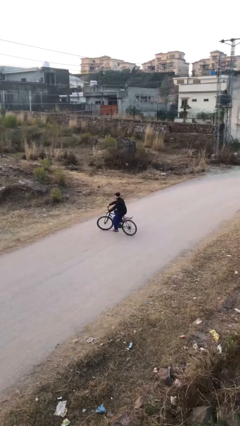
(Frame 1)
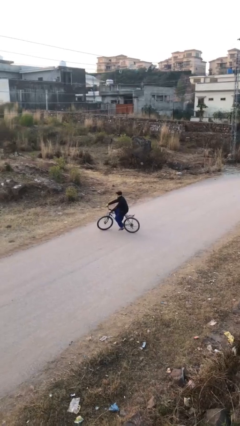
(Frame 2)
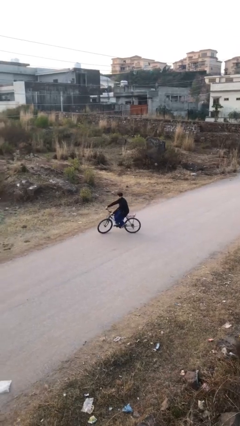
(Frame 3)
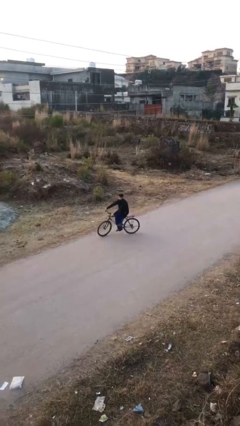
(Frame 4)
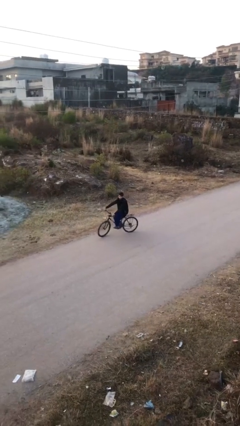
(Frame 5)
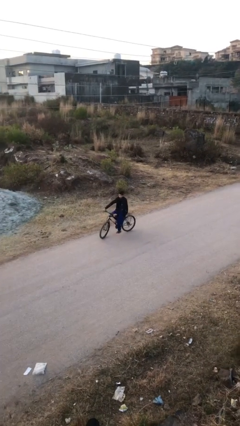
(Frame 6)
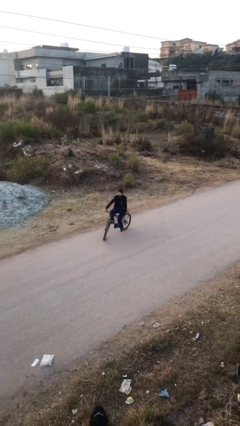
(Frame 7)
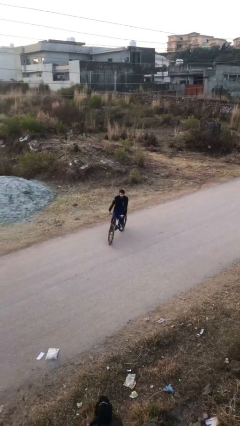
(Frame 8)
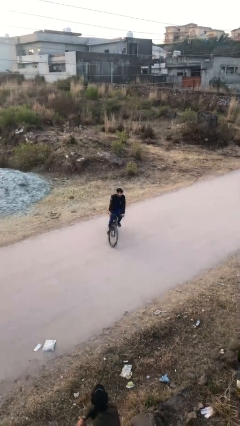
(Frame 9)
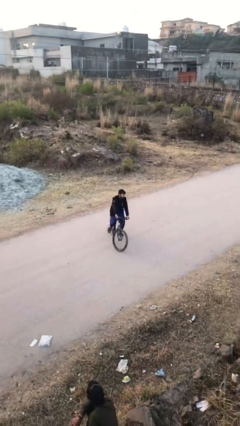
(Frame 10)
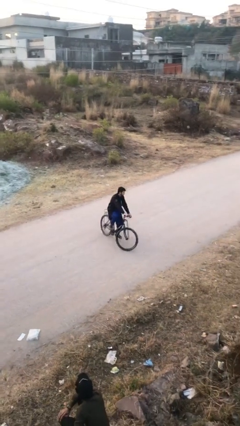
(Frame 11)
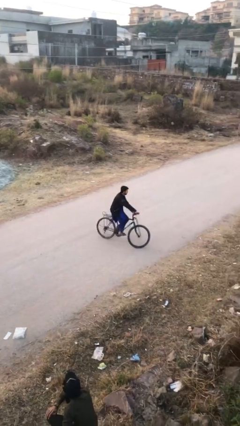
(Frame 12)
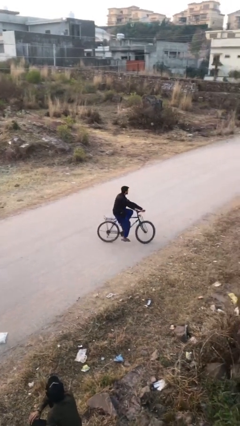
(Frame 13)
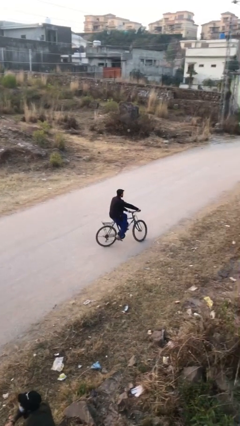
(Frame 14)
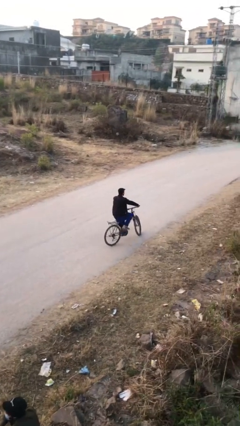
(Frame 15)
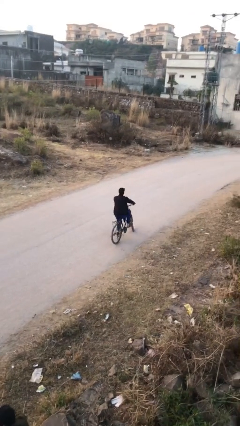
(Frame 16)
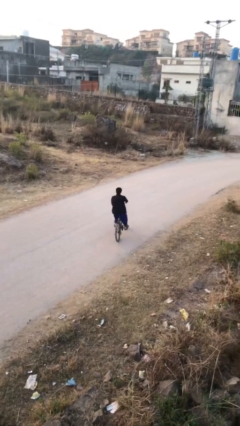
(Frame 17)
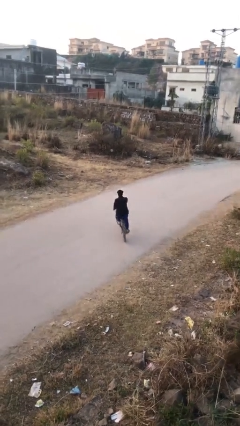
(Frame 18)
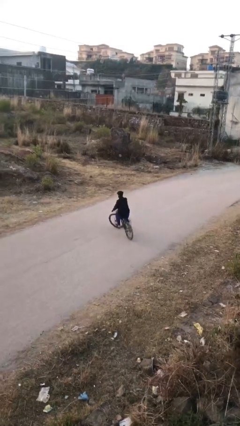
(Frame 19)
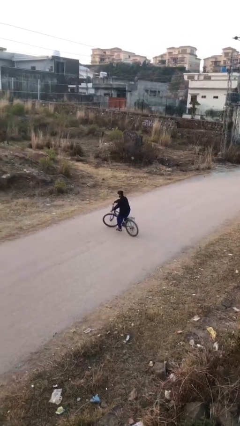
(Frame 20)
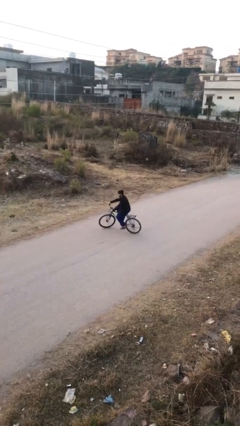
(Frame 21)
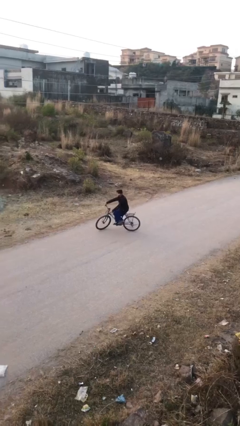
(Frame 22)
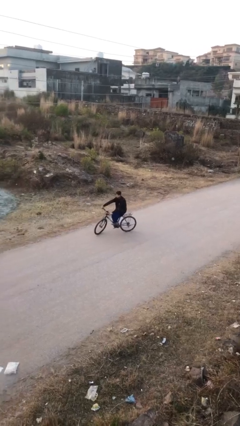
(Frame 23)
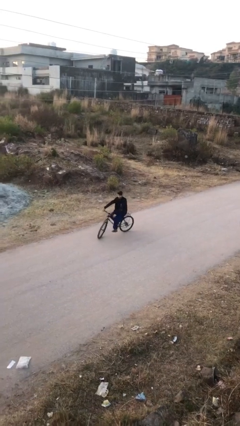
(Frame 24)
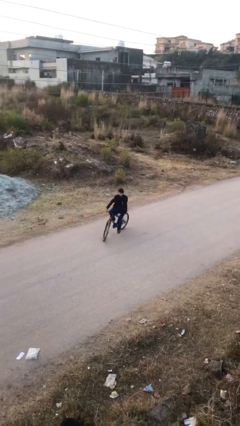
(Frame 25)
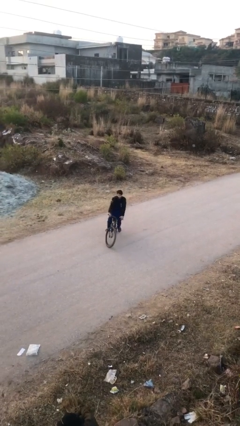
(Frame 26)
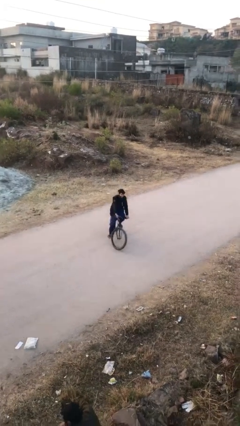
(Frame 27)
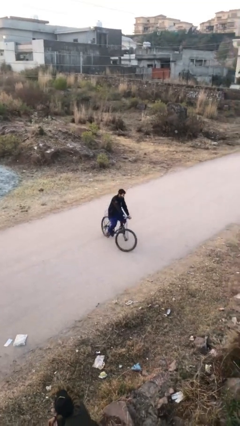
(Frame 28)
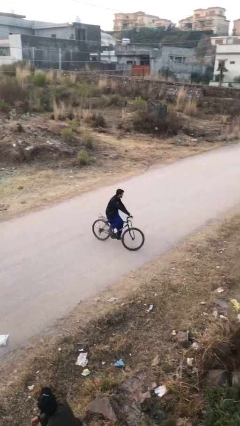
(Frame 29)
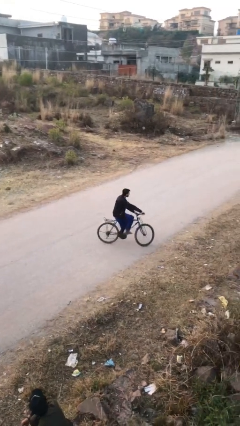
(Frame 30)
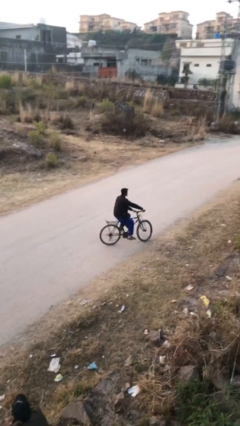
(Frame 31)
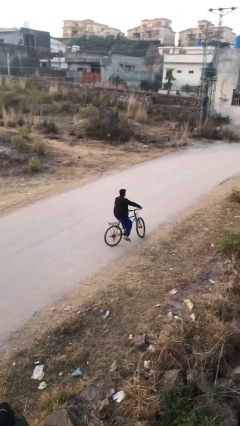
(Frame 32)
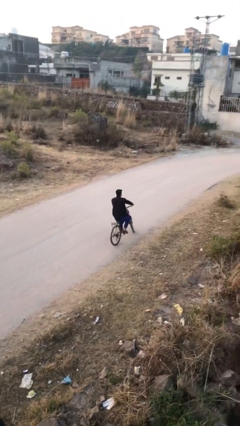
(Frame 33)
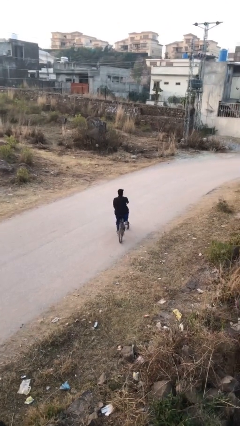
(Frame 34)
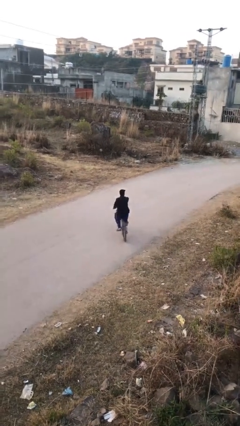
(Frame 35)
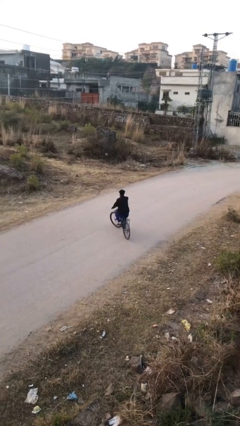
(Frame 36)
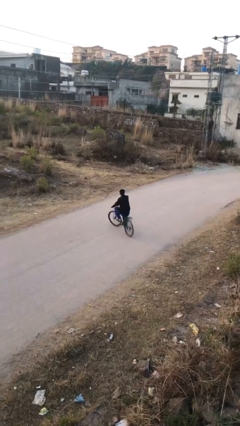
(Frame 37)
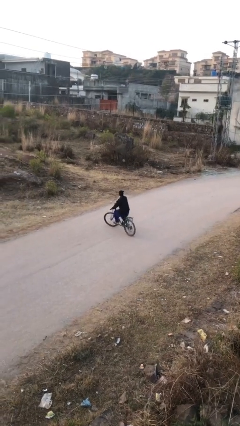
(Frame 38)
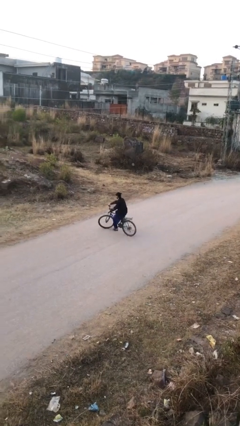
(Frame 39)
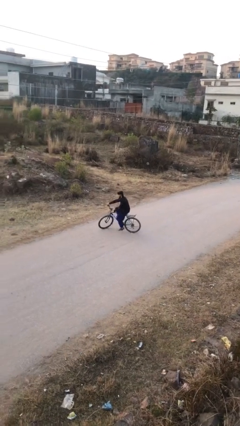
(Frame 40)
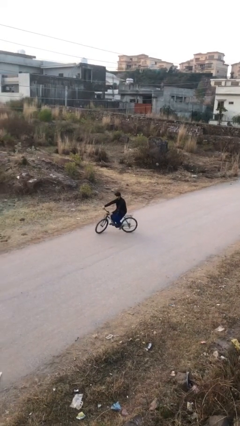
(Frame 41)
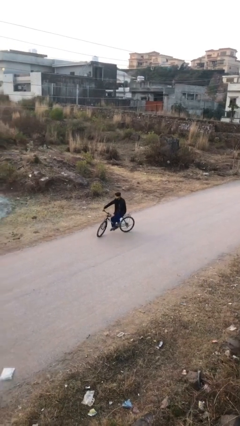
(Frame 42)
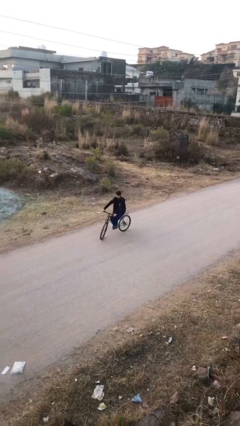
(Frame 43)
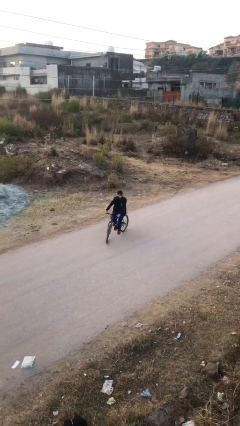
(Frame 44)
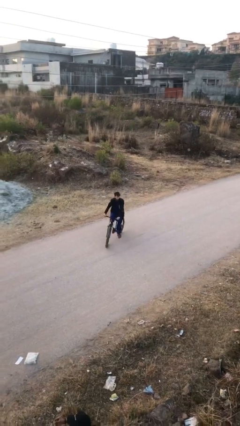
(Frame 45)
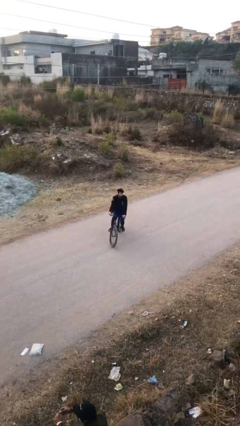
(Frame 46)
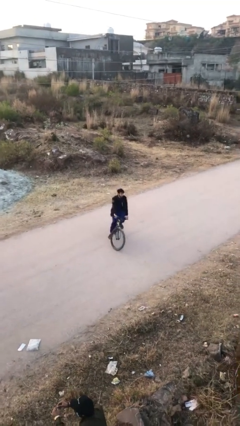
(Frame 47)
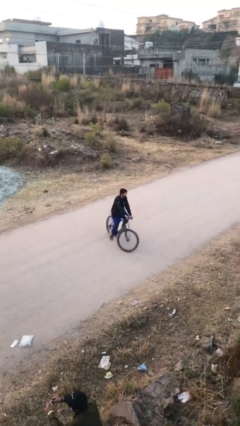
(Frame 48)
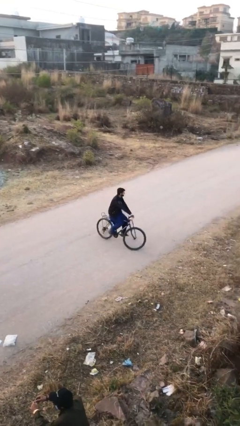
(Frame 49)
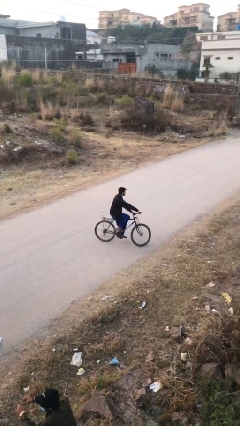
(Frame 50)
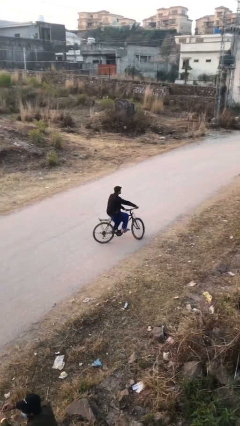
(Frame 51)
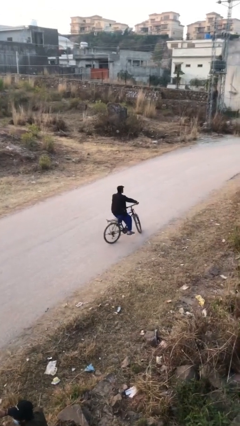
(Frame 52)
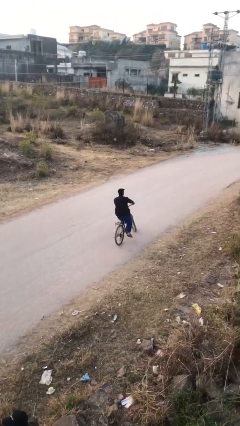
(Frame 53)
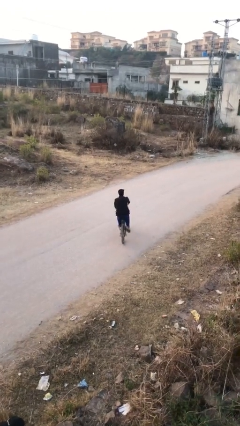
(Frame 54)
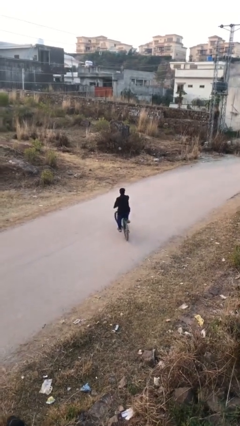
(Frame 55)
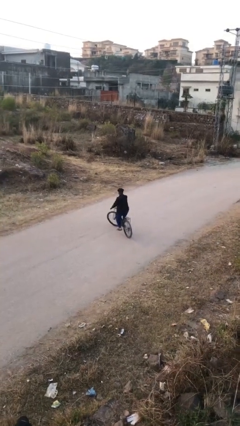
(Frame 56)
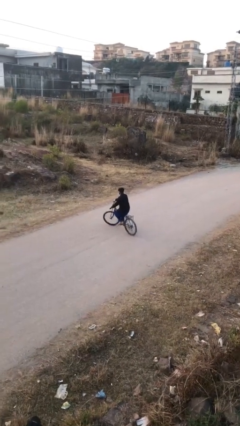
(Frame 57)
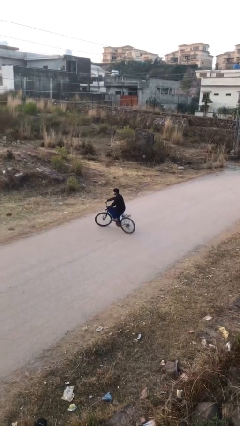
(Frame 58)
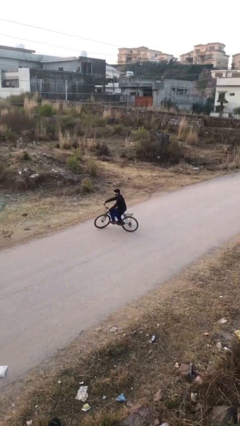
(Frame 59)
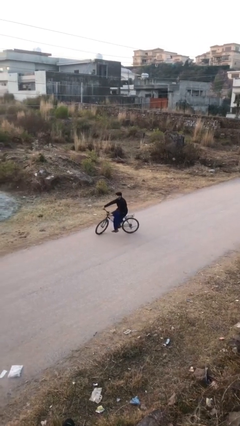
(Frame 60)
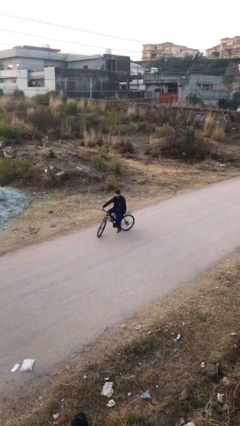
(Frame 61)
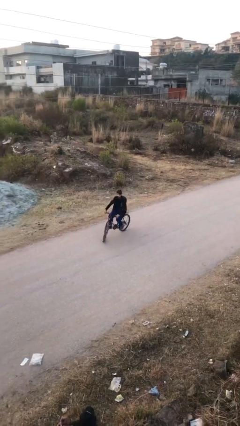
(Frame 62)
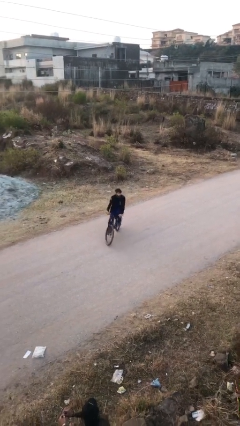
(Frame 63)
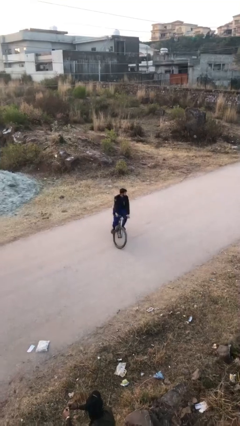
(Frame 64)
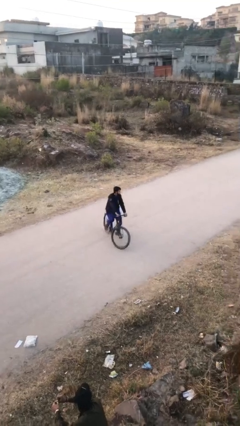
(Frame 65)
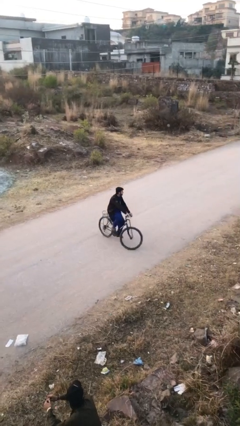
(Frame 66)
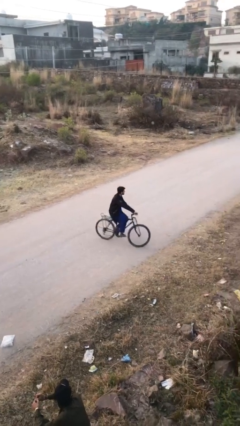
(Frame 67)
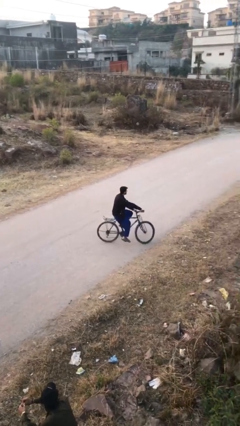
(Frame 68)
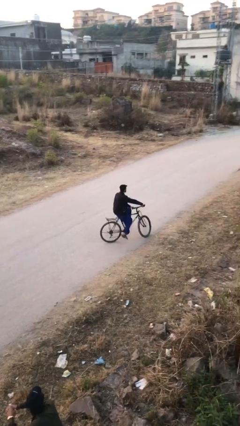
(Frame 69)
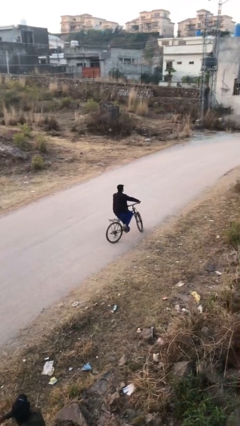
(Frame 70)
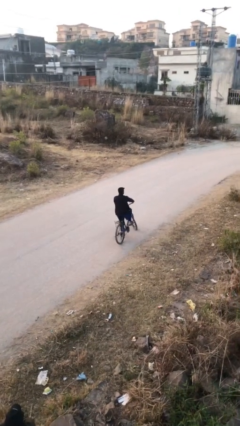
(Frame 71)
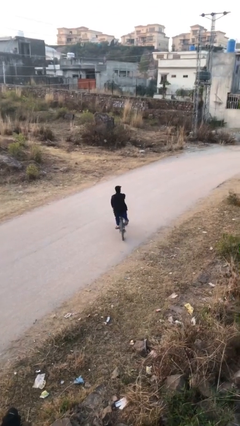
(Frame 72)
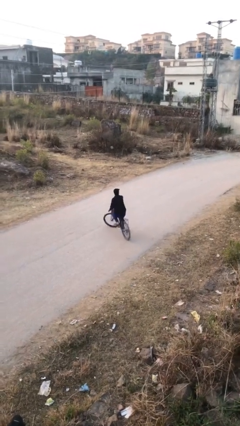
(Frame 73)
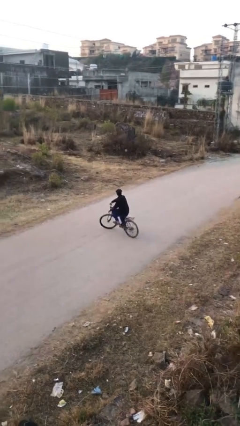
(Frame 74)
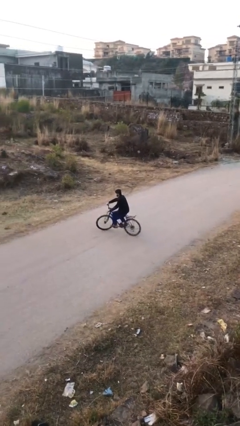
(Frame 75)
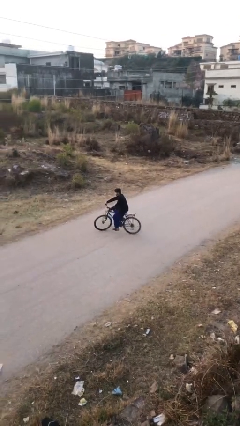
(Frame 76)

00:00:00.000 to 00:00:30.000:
person rides bicycle

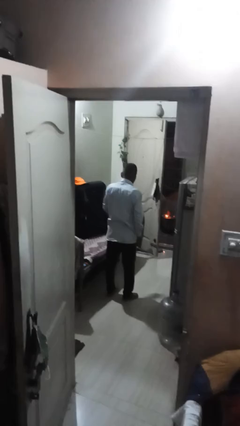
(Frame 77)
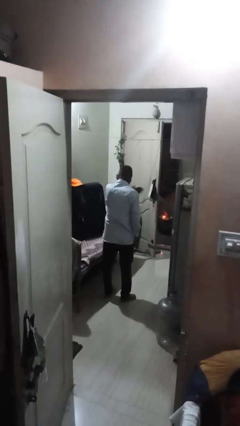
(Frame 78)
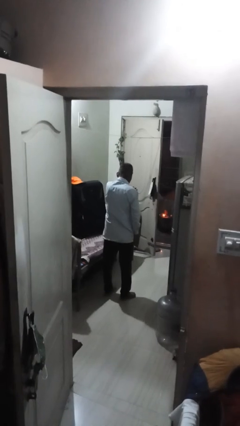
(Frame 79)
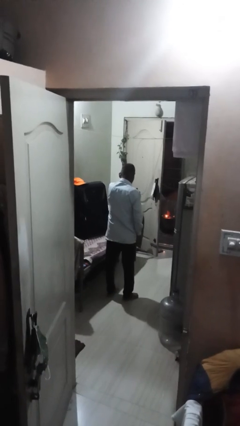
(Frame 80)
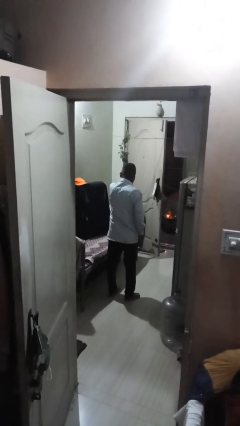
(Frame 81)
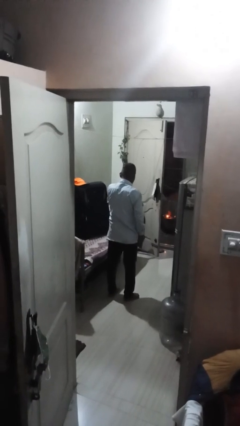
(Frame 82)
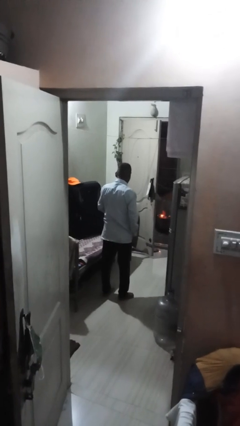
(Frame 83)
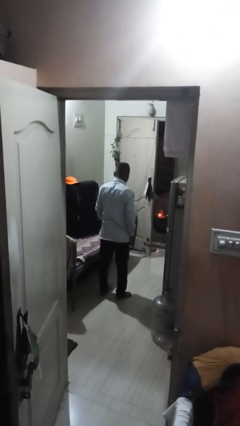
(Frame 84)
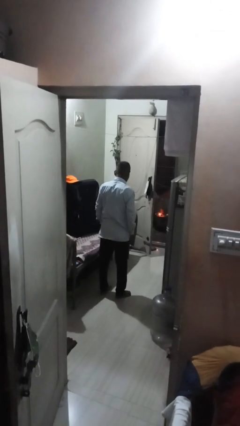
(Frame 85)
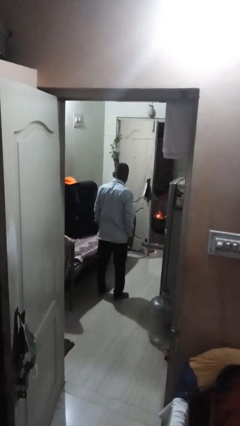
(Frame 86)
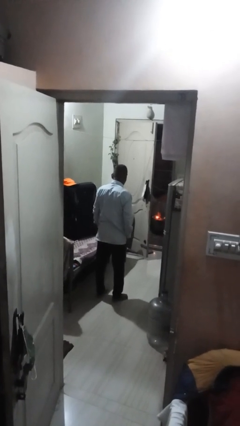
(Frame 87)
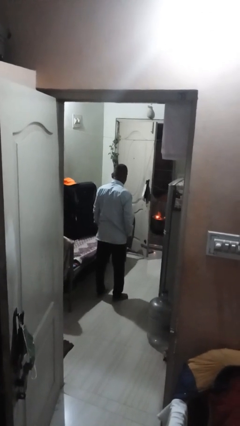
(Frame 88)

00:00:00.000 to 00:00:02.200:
person swats bug

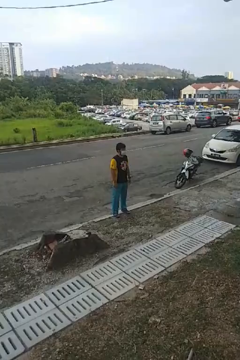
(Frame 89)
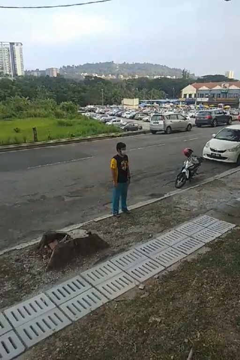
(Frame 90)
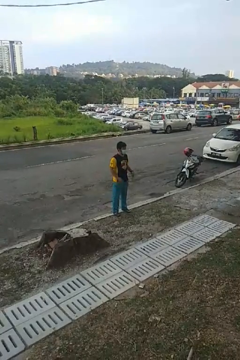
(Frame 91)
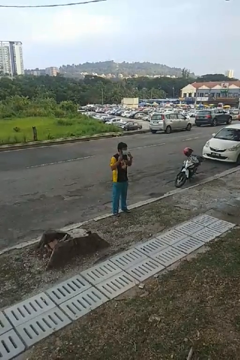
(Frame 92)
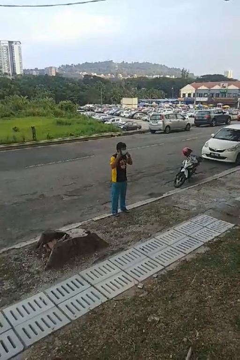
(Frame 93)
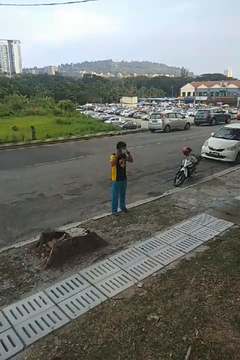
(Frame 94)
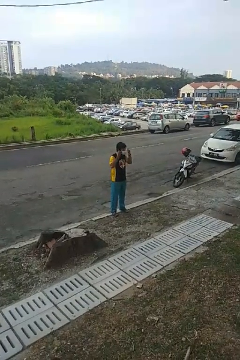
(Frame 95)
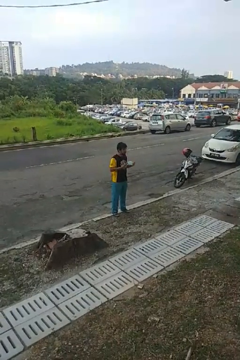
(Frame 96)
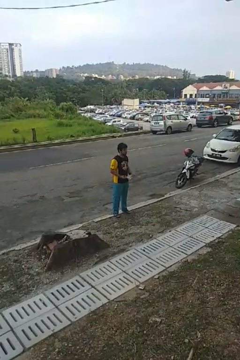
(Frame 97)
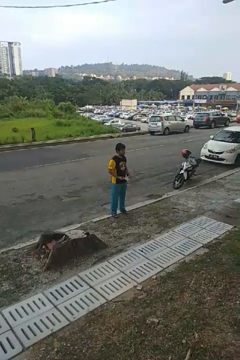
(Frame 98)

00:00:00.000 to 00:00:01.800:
person takes off facemask
